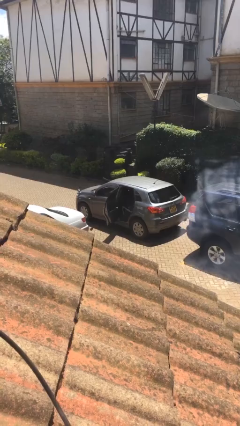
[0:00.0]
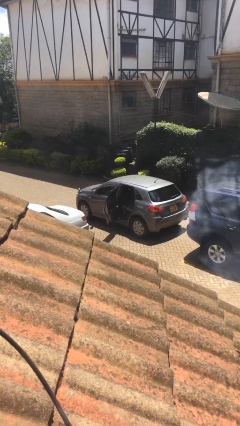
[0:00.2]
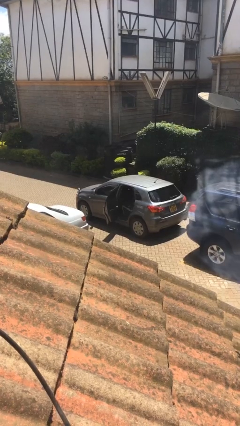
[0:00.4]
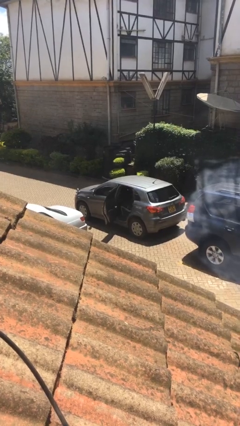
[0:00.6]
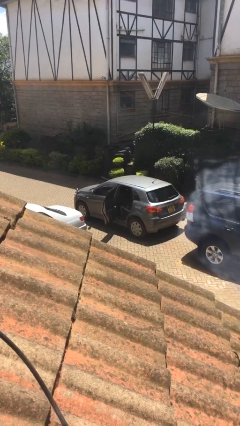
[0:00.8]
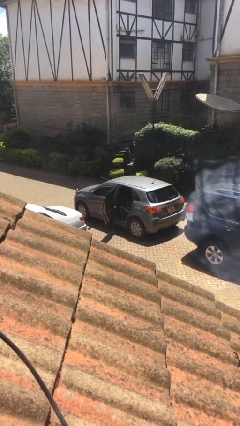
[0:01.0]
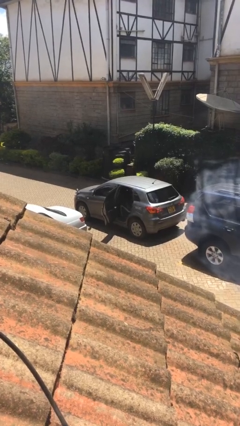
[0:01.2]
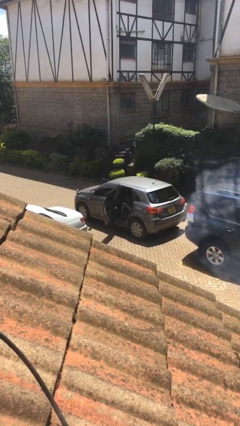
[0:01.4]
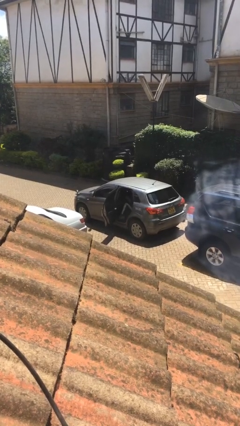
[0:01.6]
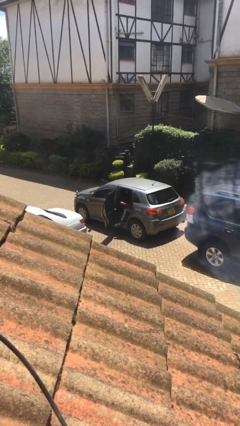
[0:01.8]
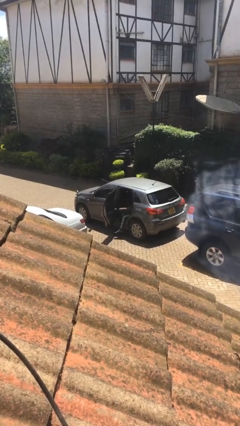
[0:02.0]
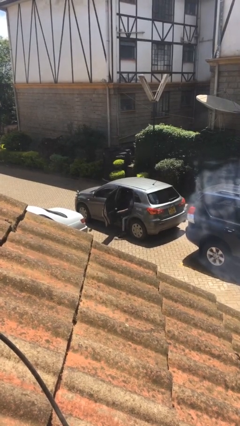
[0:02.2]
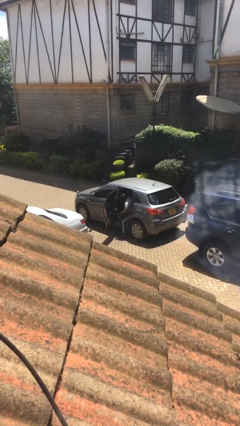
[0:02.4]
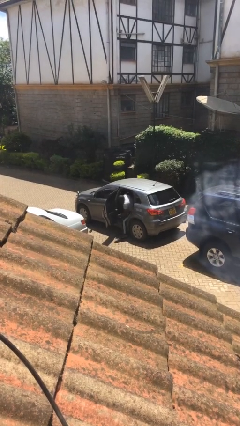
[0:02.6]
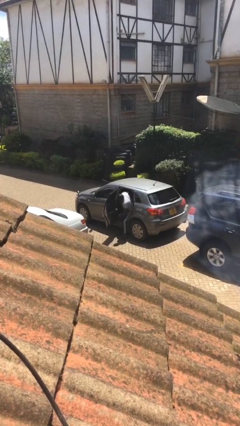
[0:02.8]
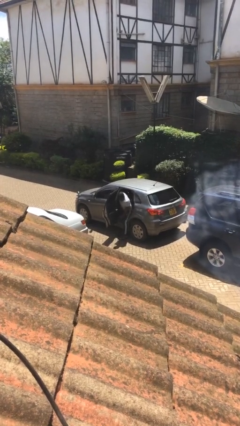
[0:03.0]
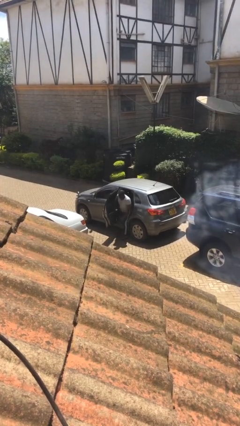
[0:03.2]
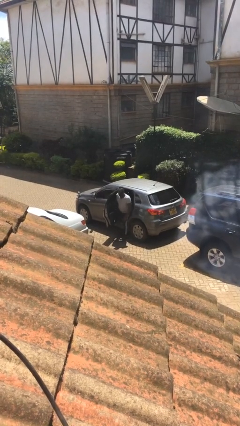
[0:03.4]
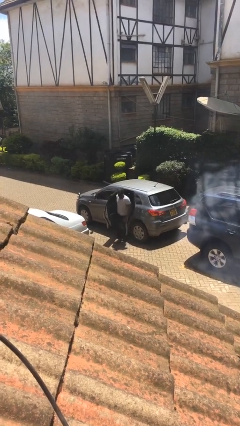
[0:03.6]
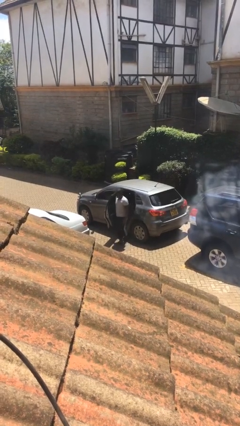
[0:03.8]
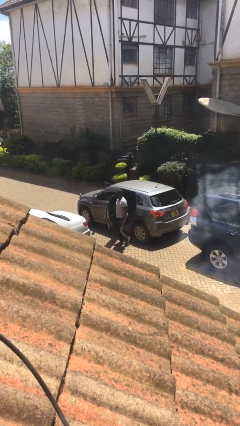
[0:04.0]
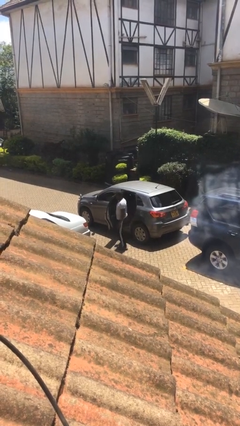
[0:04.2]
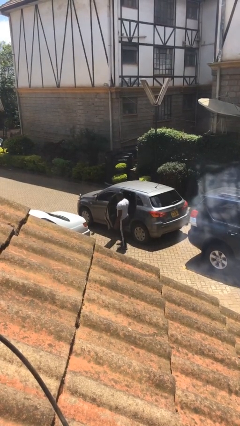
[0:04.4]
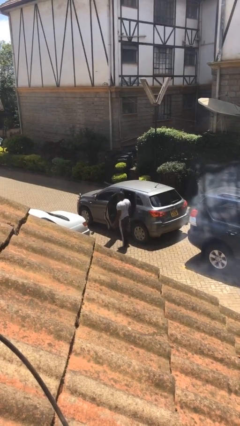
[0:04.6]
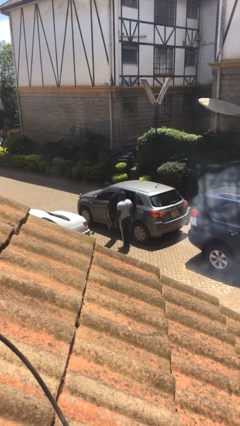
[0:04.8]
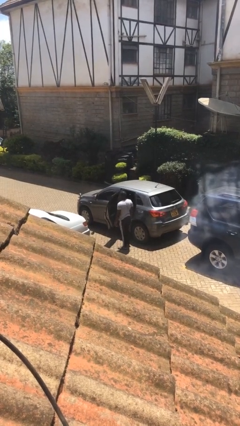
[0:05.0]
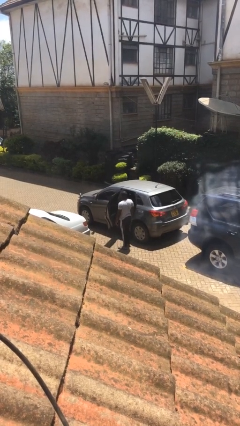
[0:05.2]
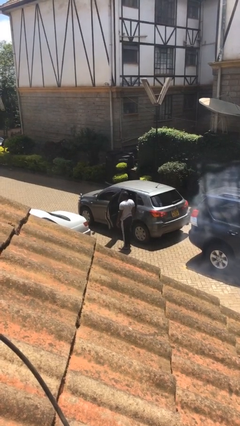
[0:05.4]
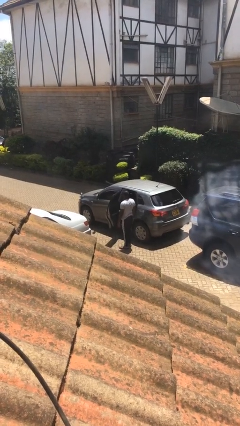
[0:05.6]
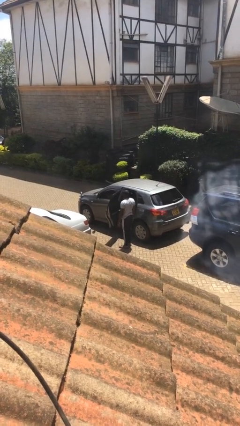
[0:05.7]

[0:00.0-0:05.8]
person exits car

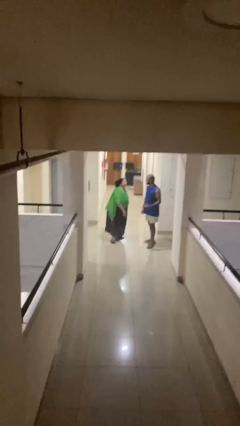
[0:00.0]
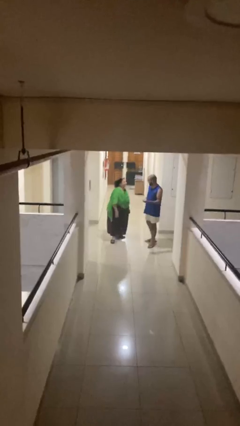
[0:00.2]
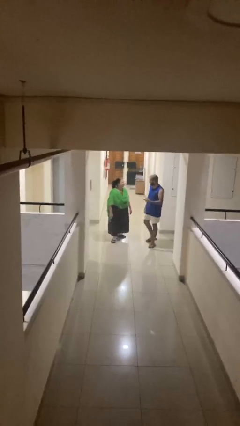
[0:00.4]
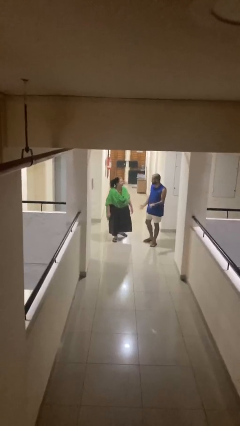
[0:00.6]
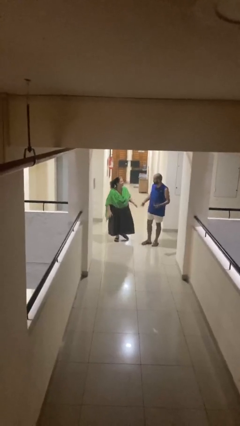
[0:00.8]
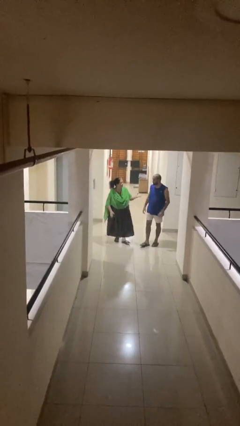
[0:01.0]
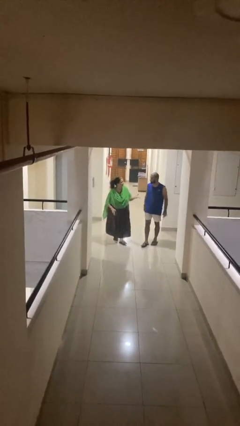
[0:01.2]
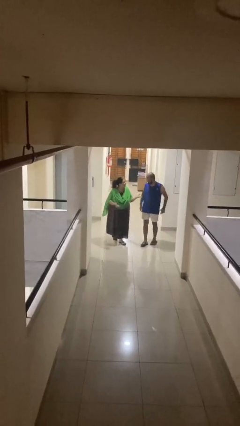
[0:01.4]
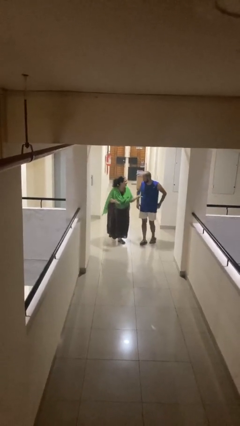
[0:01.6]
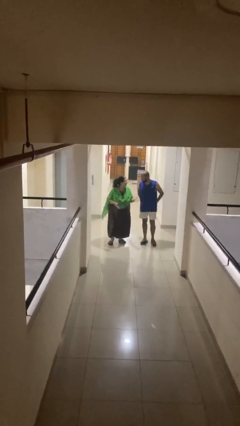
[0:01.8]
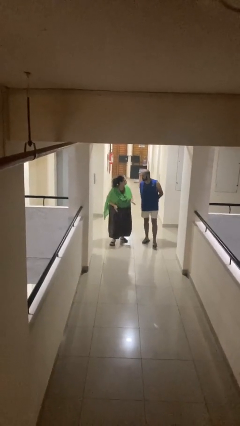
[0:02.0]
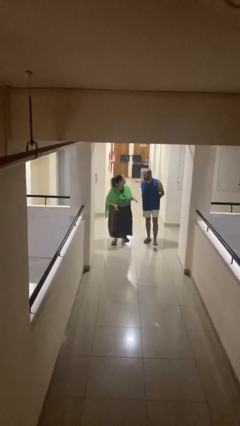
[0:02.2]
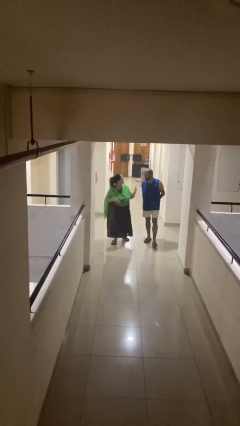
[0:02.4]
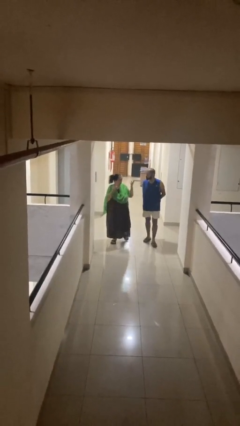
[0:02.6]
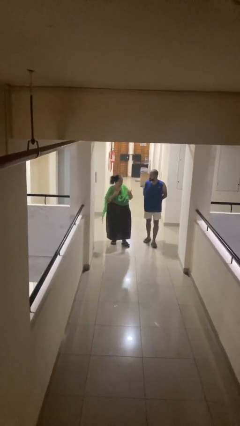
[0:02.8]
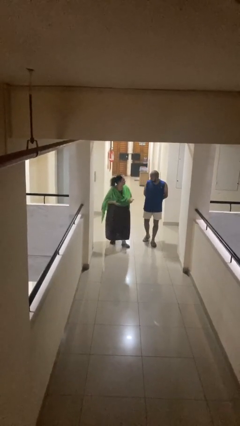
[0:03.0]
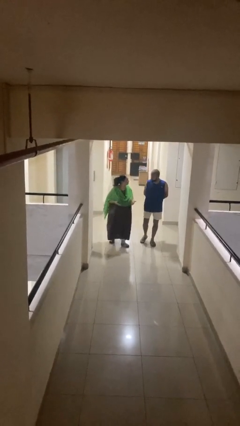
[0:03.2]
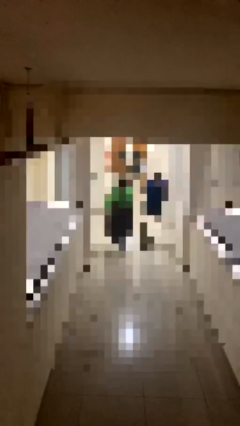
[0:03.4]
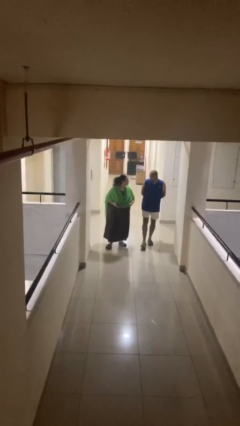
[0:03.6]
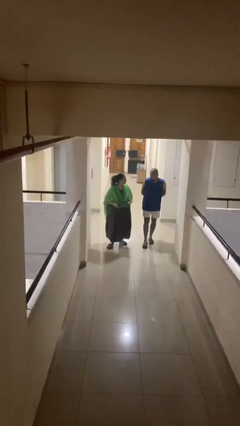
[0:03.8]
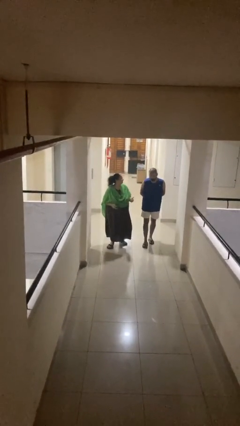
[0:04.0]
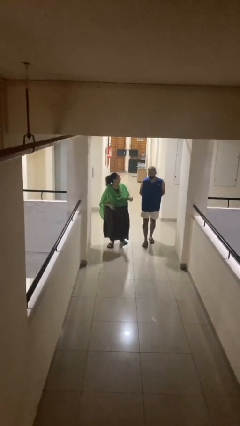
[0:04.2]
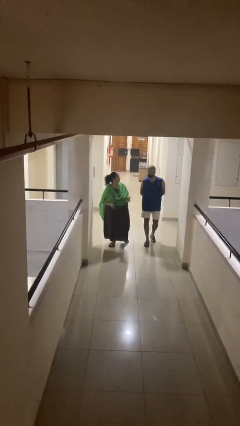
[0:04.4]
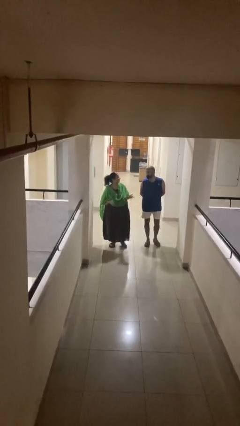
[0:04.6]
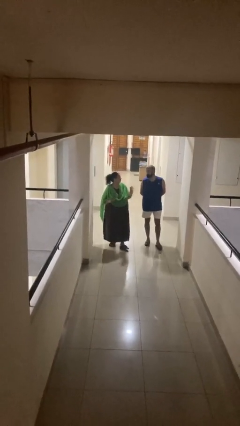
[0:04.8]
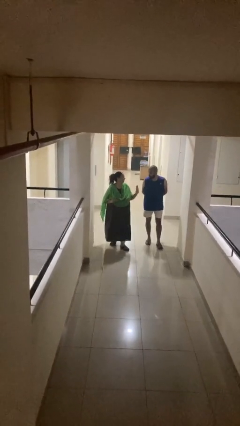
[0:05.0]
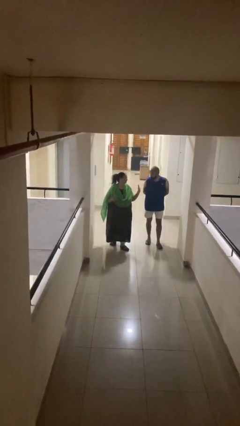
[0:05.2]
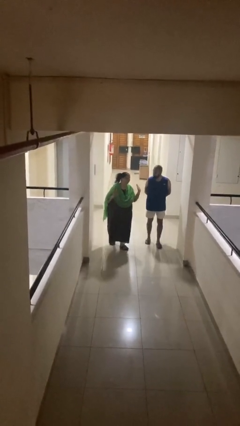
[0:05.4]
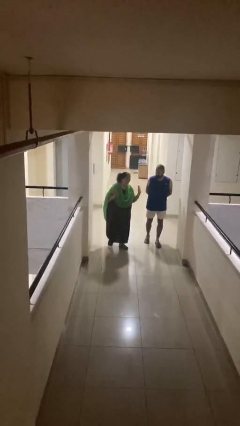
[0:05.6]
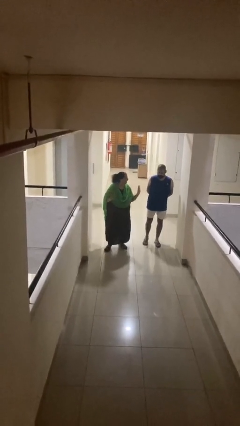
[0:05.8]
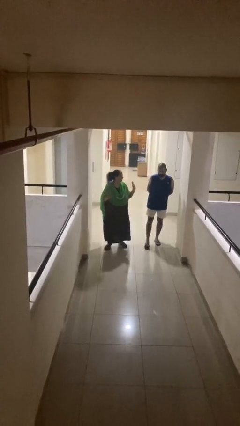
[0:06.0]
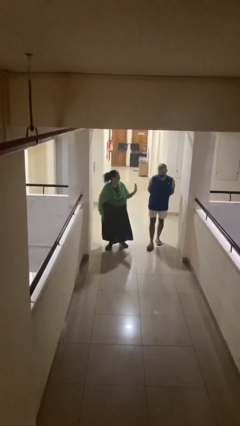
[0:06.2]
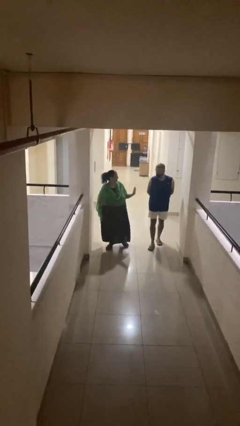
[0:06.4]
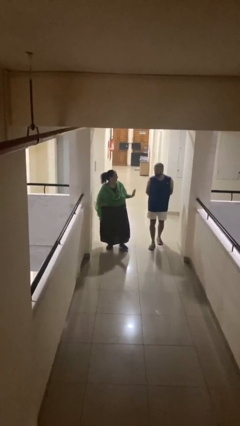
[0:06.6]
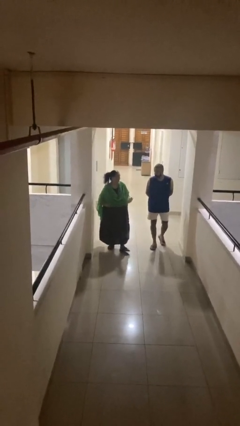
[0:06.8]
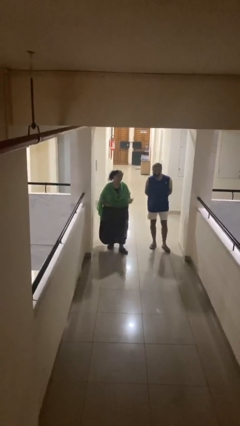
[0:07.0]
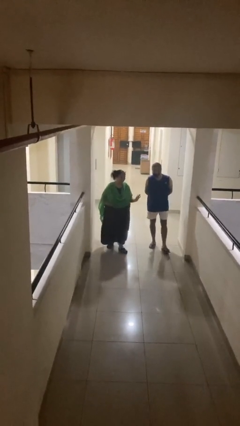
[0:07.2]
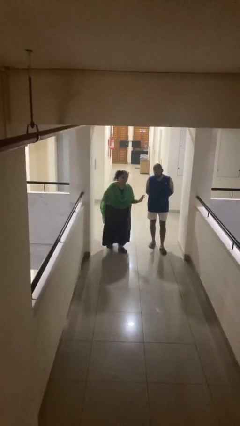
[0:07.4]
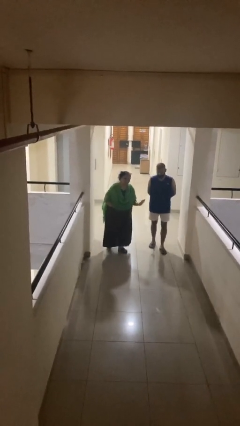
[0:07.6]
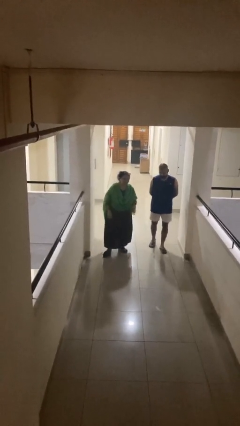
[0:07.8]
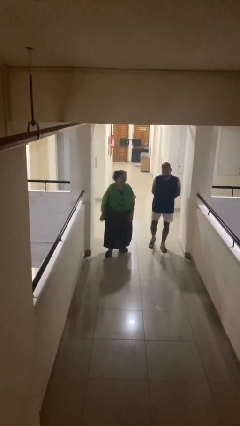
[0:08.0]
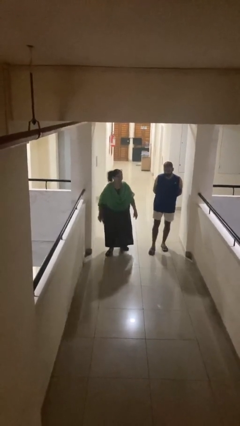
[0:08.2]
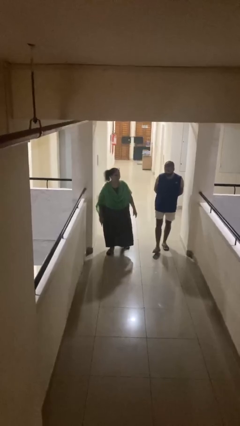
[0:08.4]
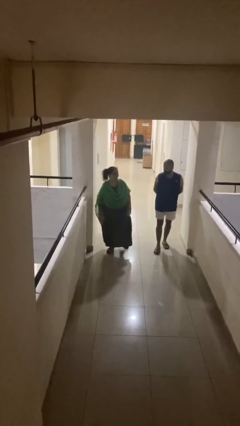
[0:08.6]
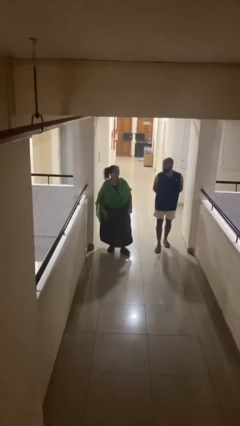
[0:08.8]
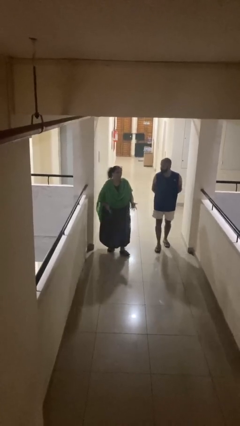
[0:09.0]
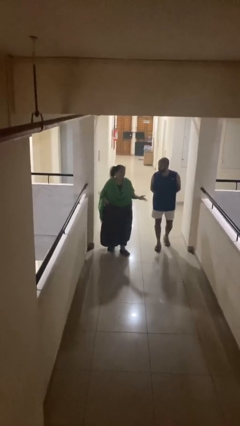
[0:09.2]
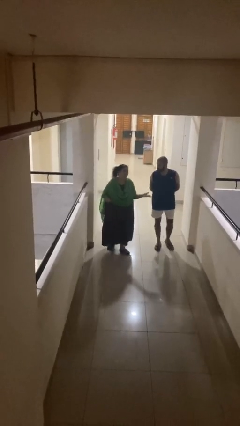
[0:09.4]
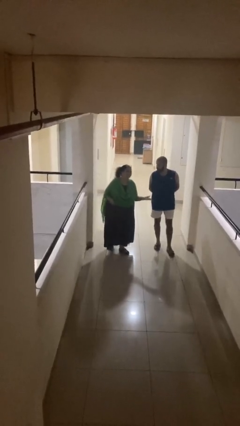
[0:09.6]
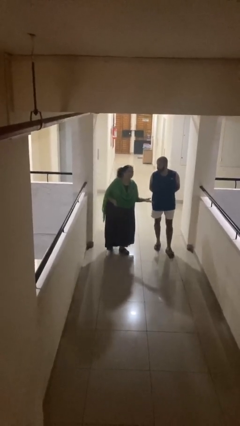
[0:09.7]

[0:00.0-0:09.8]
person talks to person

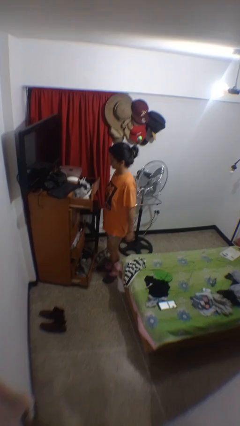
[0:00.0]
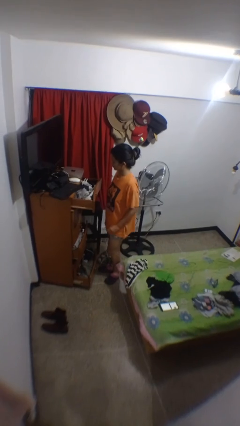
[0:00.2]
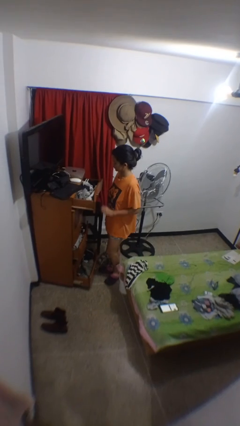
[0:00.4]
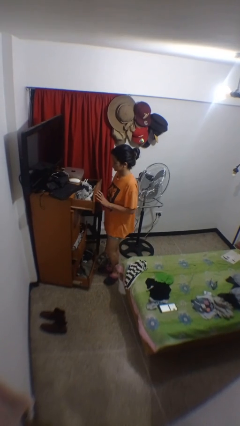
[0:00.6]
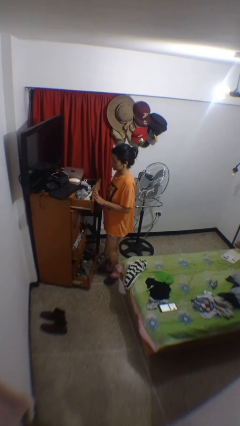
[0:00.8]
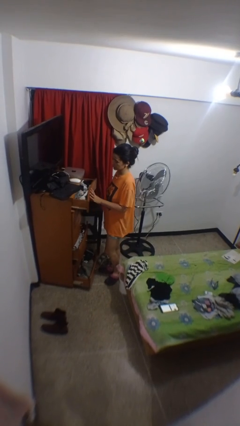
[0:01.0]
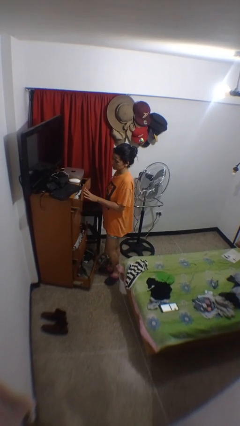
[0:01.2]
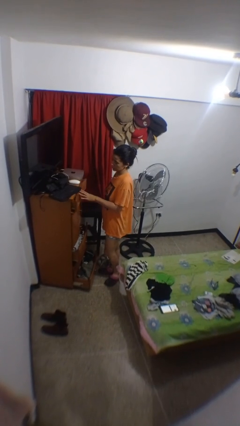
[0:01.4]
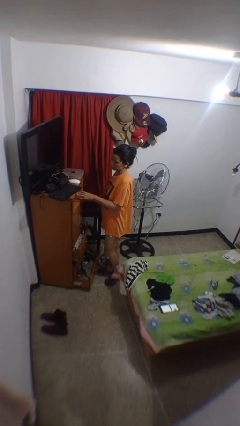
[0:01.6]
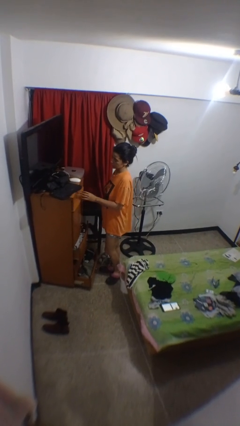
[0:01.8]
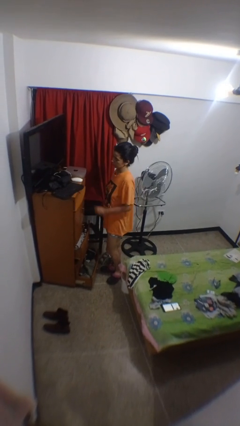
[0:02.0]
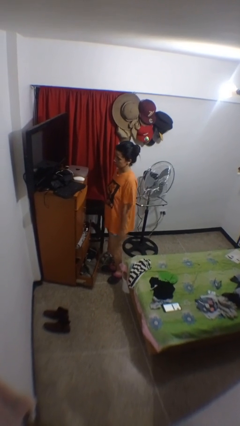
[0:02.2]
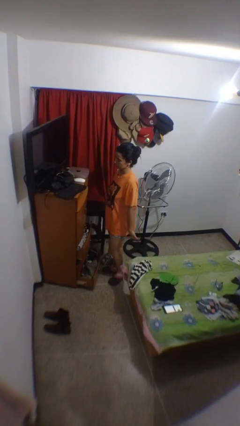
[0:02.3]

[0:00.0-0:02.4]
person closes dresser drawer
